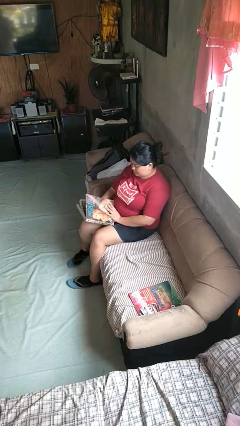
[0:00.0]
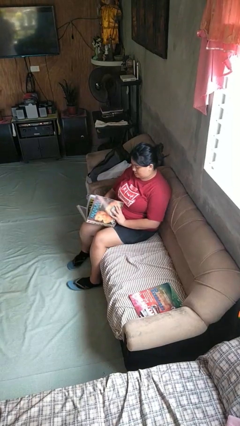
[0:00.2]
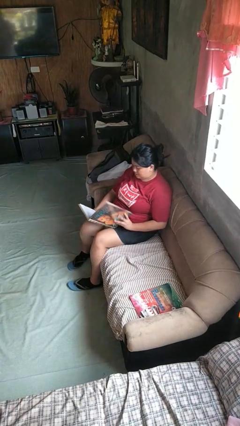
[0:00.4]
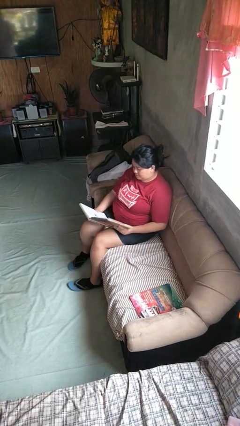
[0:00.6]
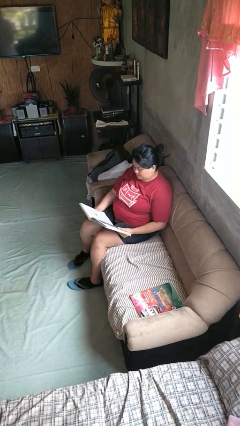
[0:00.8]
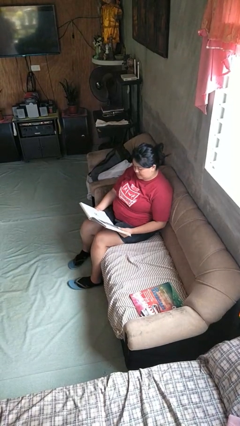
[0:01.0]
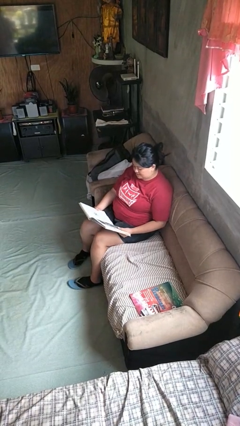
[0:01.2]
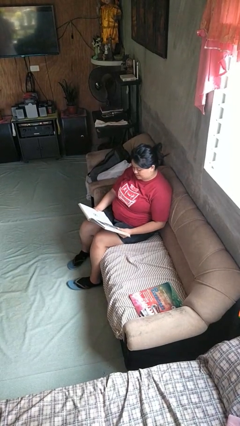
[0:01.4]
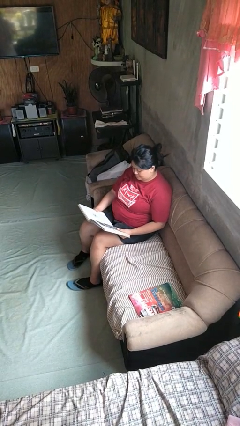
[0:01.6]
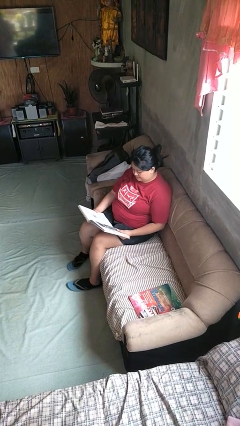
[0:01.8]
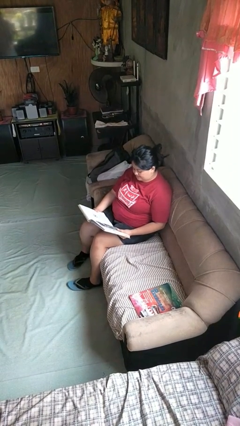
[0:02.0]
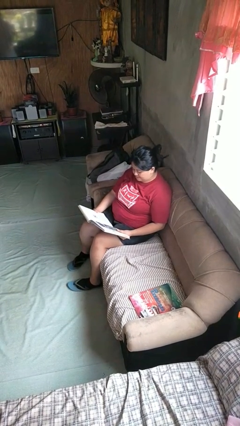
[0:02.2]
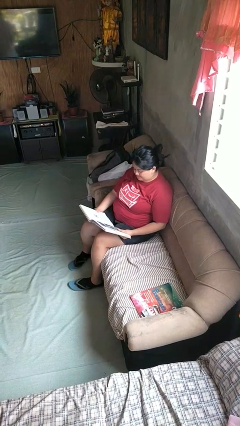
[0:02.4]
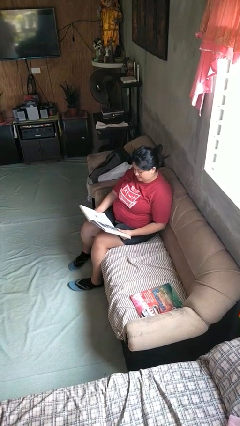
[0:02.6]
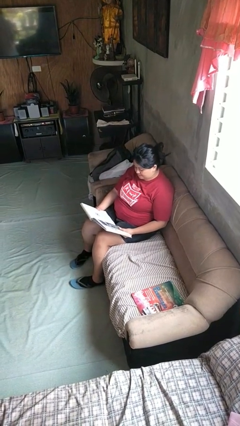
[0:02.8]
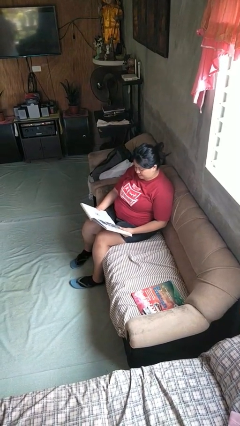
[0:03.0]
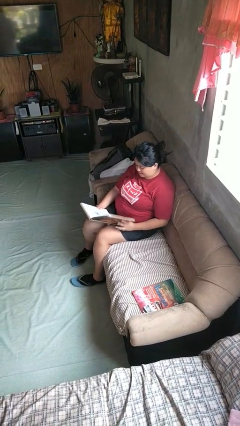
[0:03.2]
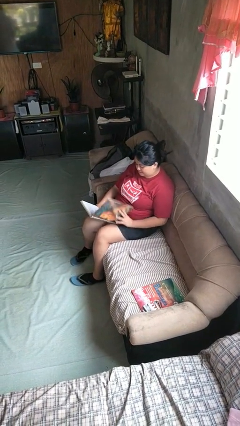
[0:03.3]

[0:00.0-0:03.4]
person reads book

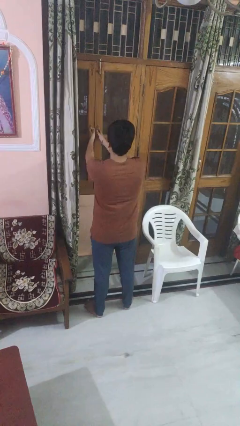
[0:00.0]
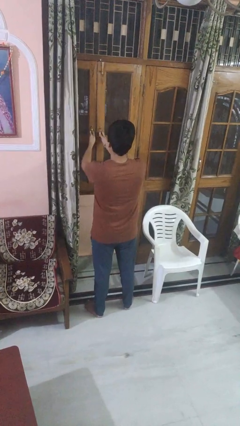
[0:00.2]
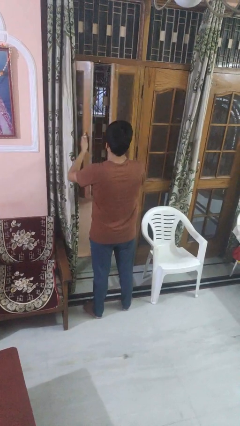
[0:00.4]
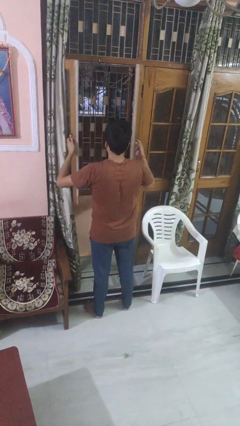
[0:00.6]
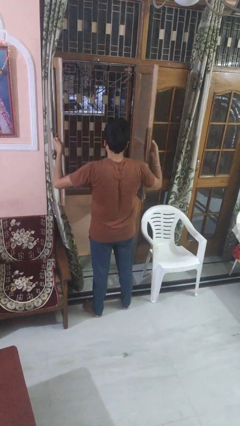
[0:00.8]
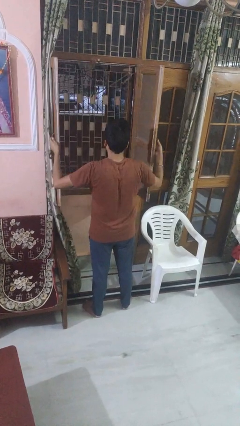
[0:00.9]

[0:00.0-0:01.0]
person opens home window

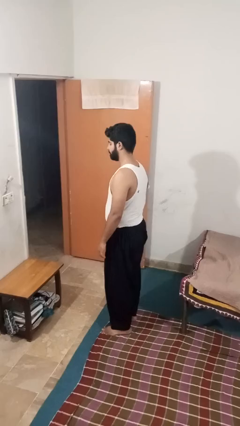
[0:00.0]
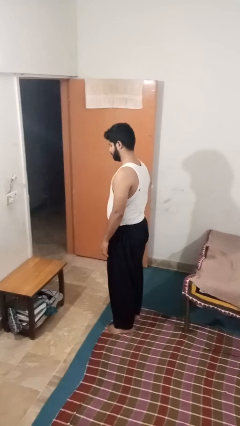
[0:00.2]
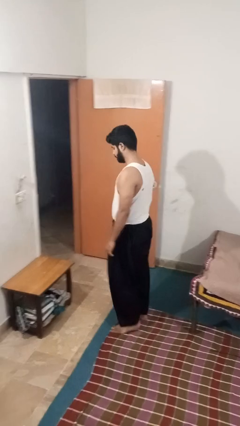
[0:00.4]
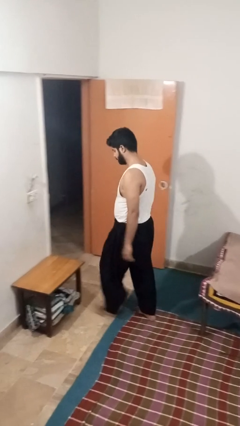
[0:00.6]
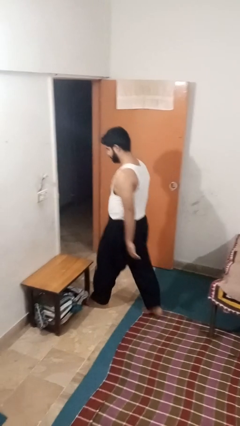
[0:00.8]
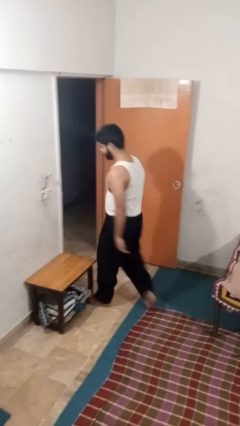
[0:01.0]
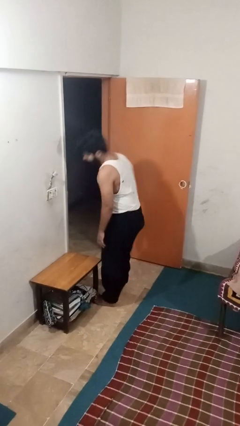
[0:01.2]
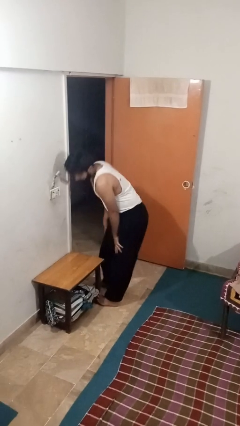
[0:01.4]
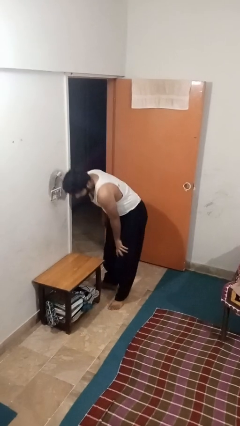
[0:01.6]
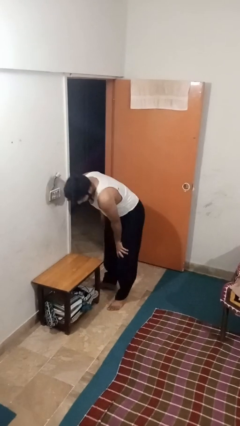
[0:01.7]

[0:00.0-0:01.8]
person bumps into table

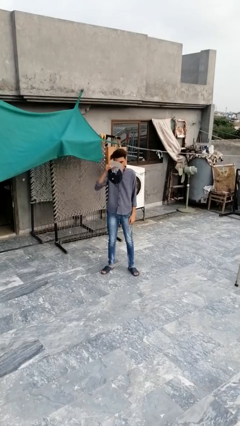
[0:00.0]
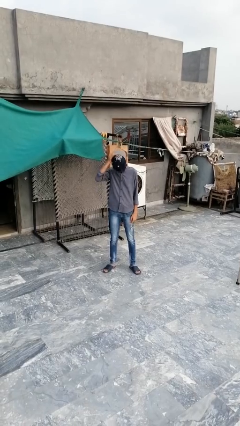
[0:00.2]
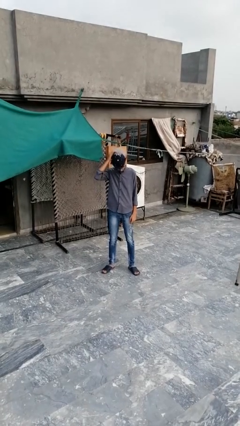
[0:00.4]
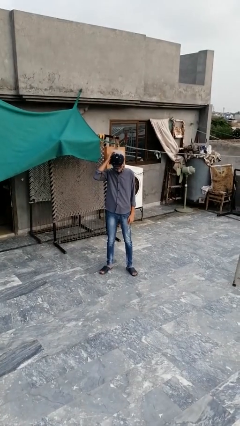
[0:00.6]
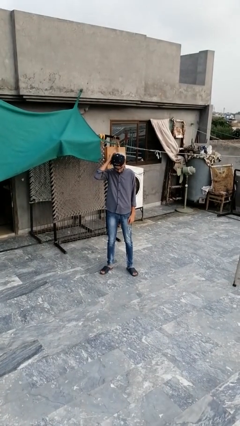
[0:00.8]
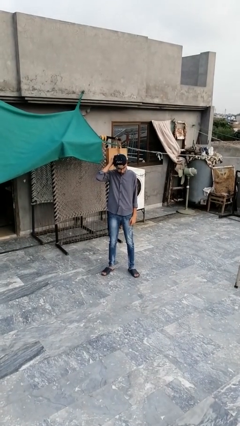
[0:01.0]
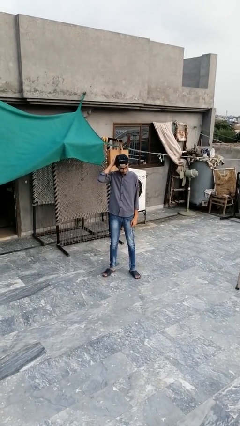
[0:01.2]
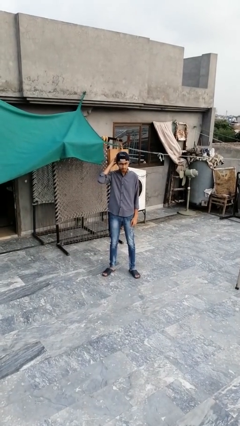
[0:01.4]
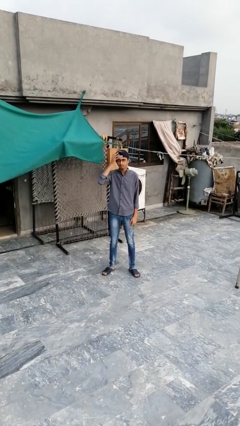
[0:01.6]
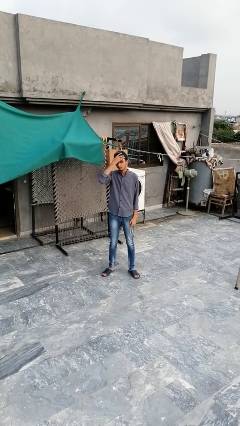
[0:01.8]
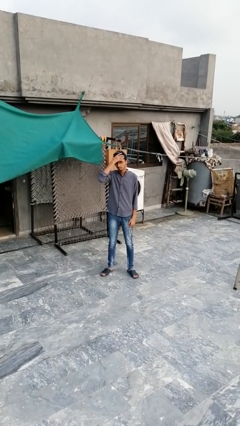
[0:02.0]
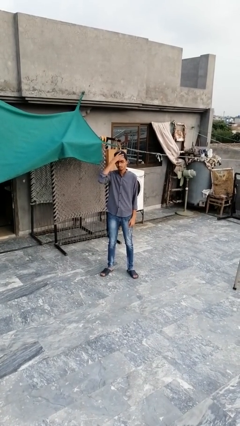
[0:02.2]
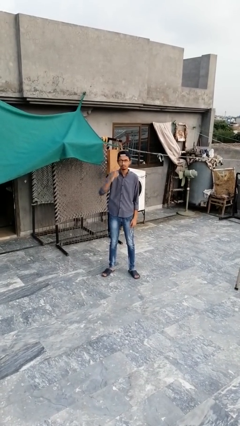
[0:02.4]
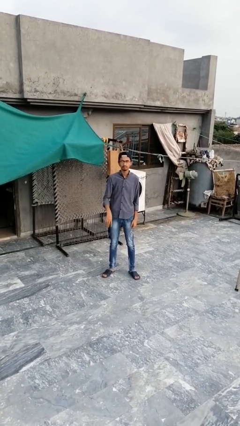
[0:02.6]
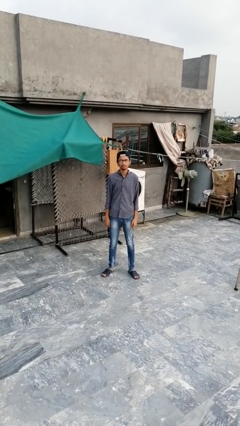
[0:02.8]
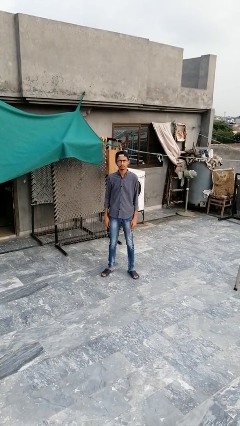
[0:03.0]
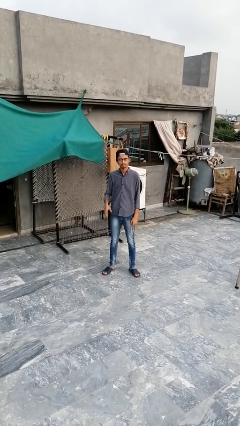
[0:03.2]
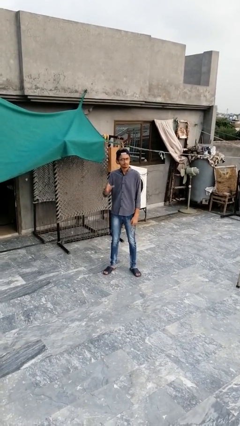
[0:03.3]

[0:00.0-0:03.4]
person puts on hat

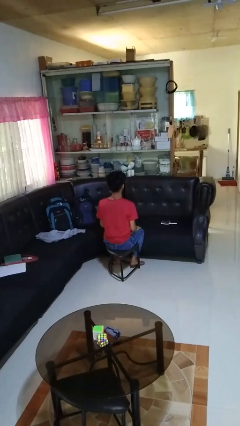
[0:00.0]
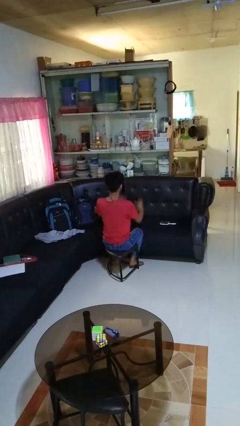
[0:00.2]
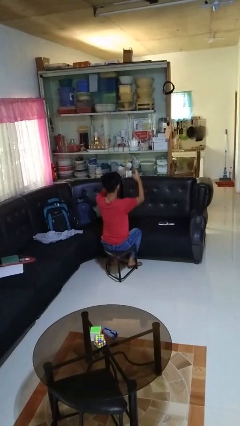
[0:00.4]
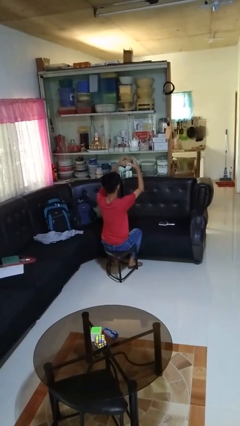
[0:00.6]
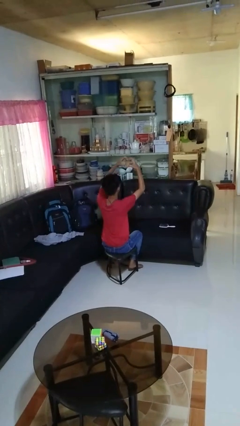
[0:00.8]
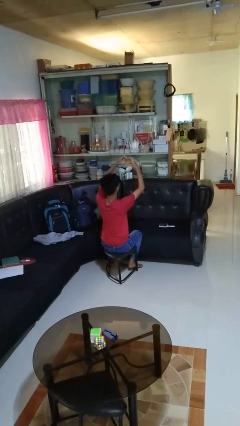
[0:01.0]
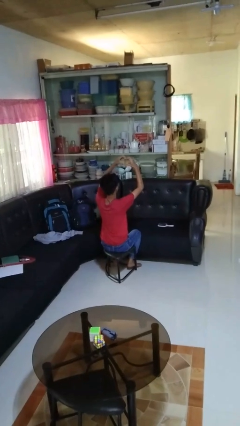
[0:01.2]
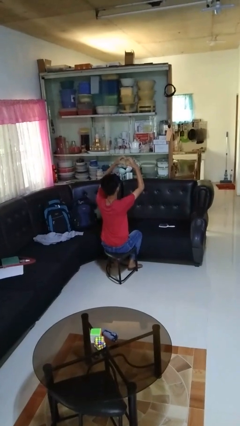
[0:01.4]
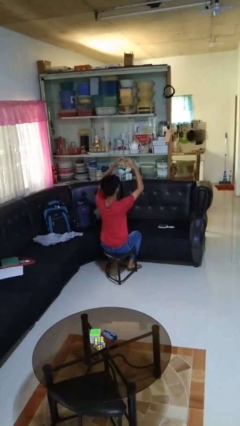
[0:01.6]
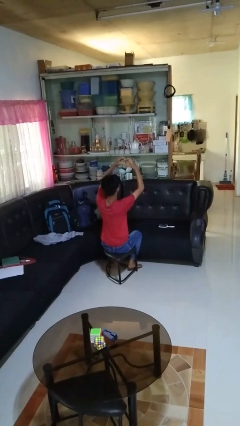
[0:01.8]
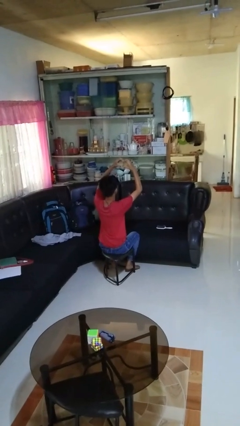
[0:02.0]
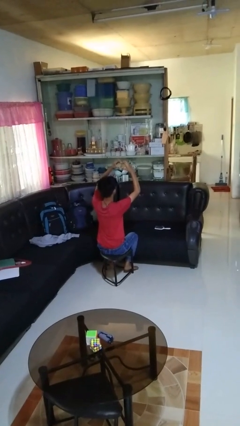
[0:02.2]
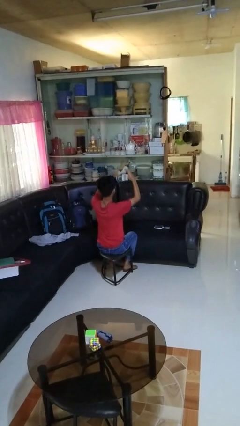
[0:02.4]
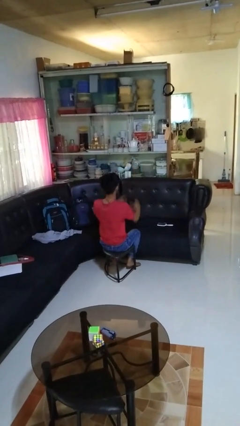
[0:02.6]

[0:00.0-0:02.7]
person gestures heart

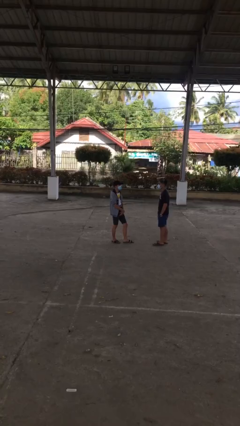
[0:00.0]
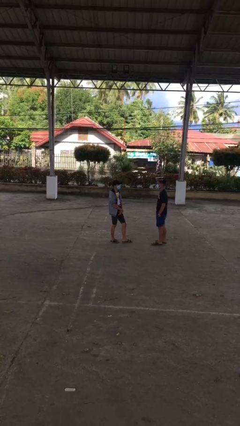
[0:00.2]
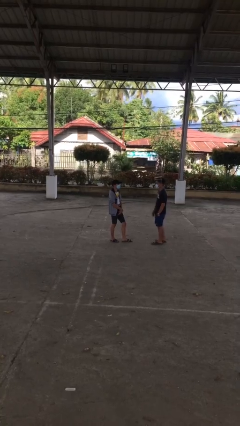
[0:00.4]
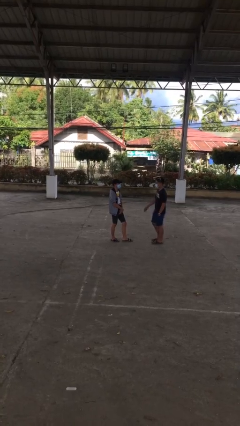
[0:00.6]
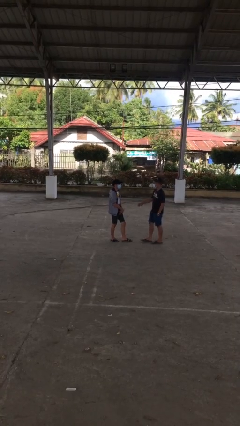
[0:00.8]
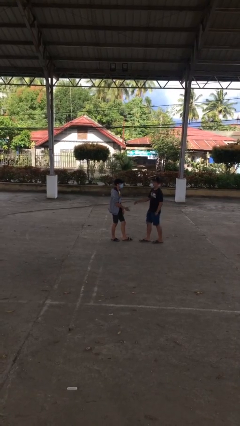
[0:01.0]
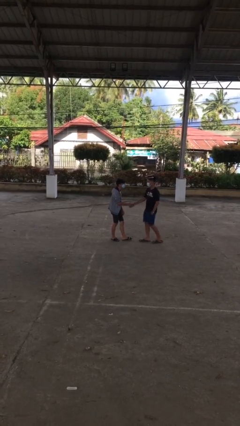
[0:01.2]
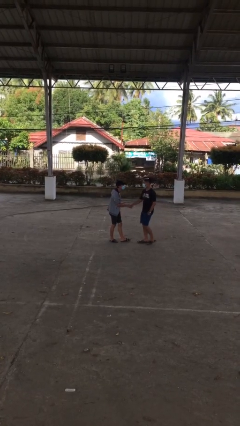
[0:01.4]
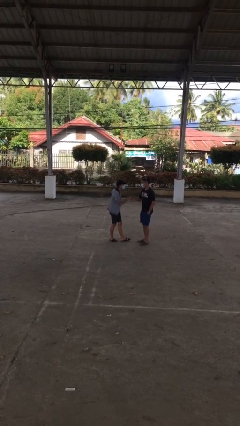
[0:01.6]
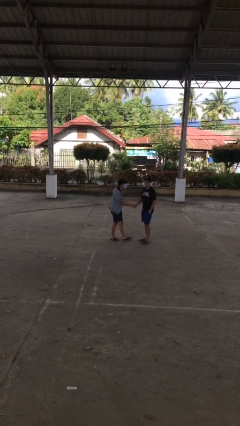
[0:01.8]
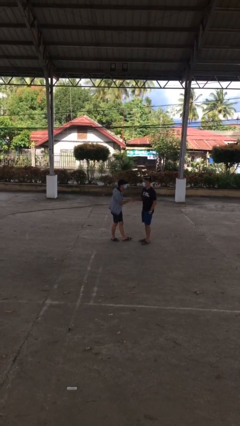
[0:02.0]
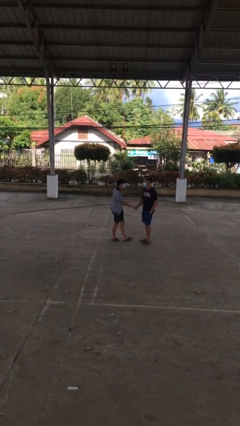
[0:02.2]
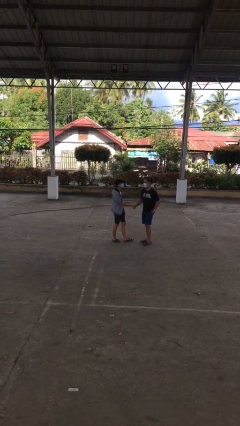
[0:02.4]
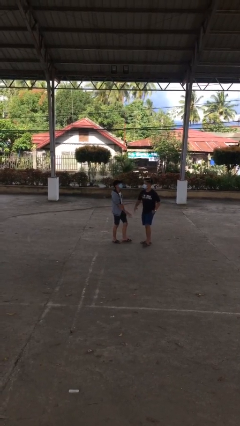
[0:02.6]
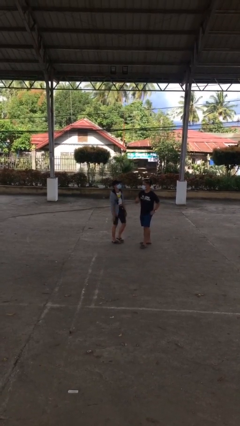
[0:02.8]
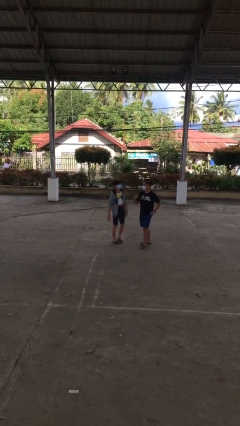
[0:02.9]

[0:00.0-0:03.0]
person shakes hand

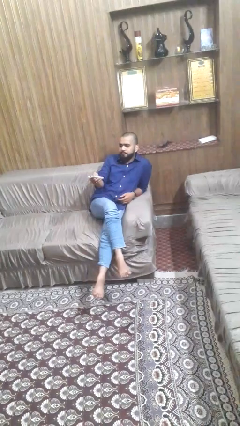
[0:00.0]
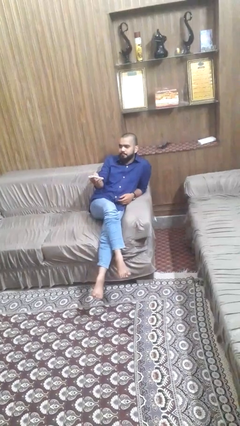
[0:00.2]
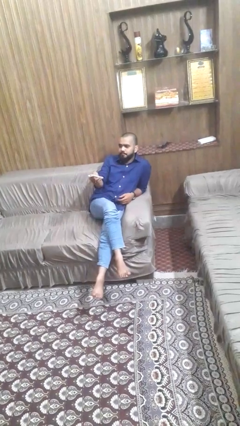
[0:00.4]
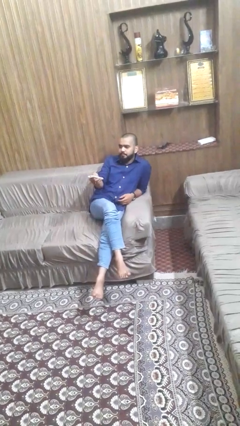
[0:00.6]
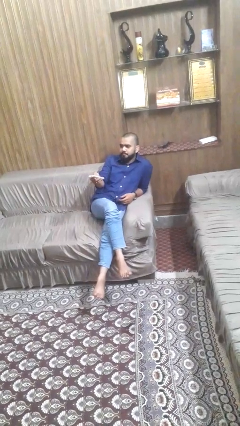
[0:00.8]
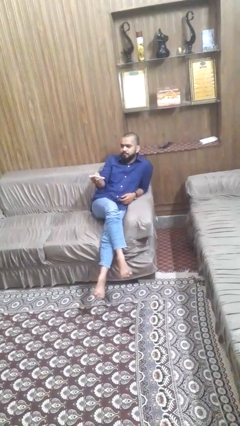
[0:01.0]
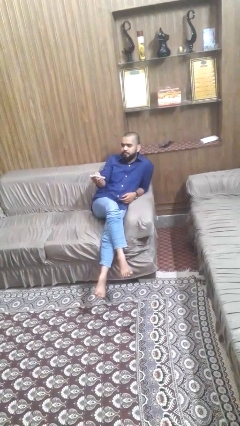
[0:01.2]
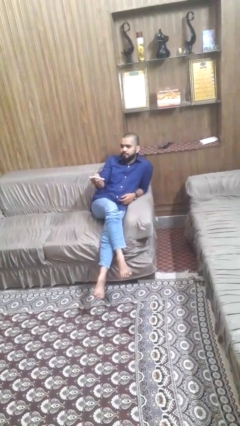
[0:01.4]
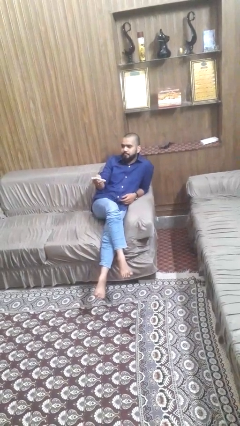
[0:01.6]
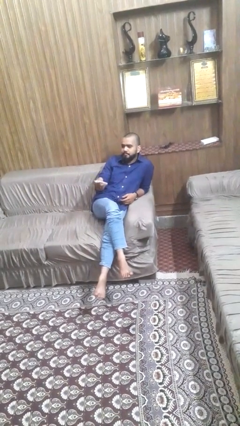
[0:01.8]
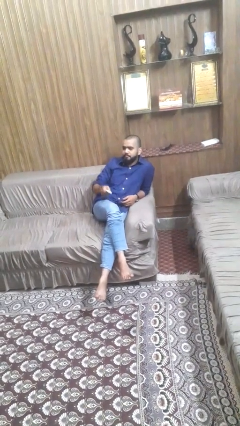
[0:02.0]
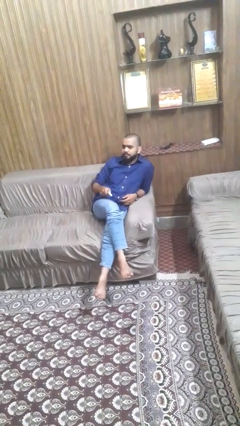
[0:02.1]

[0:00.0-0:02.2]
person uses television remote
